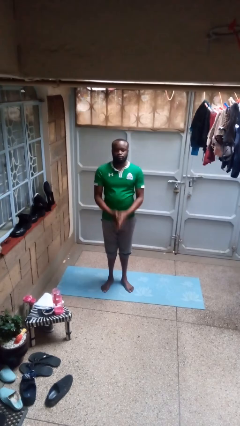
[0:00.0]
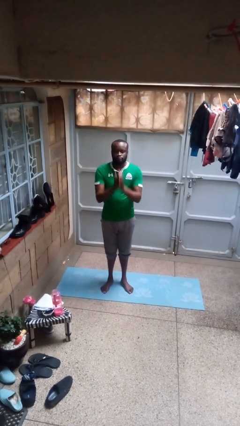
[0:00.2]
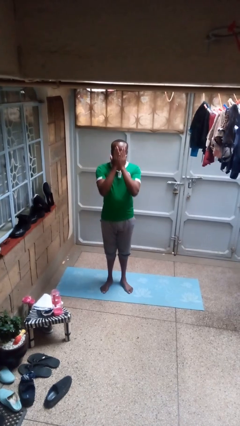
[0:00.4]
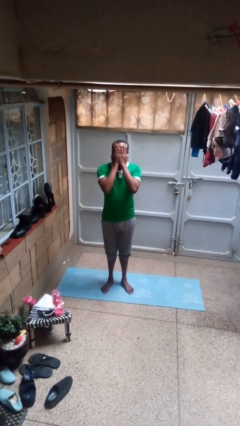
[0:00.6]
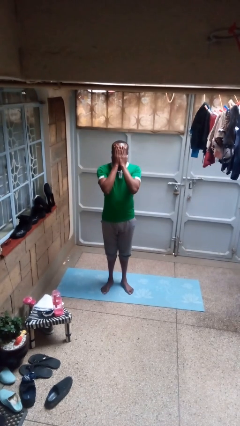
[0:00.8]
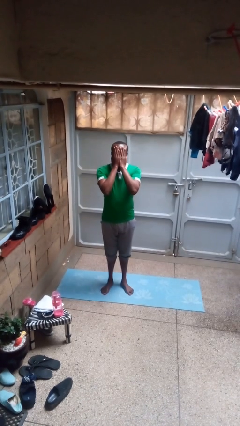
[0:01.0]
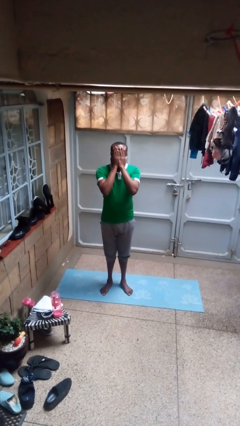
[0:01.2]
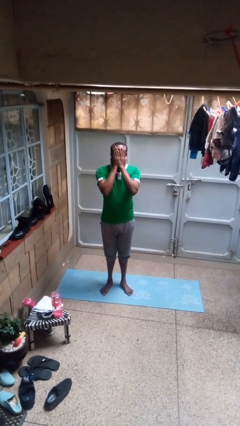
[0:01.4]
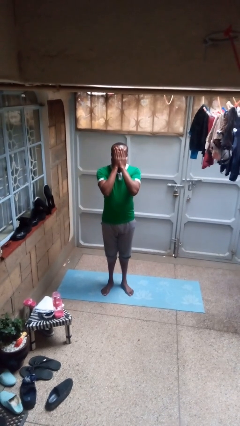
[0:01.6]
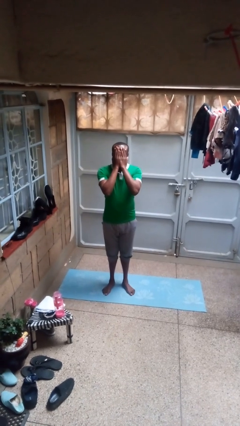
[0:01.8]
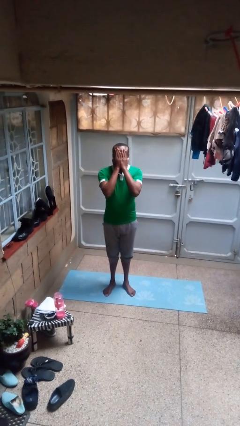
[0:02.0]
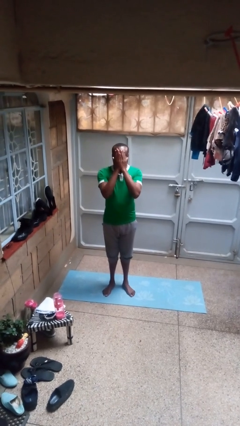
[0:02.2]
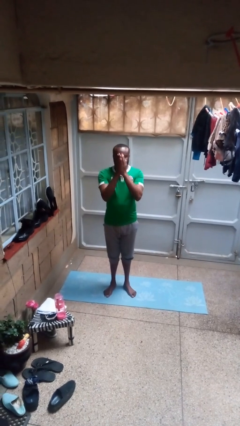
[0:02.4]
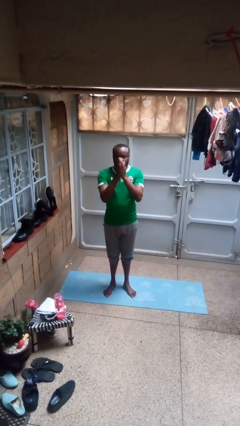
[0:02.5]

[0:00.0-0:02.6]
person covers face with hands

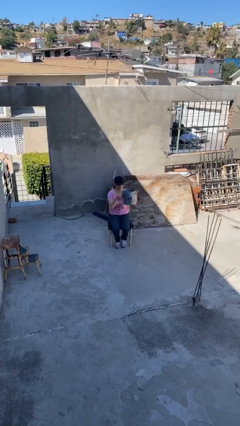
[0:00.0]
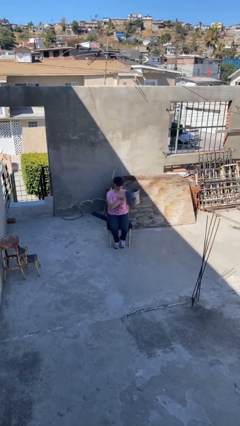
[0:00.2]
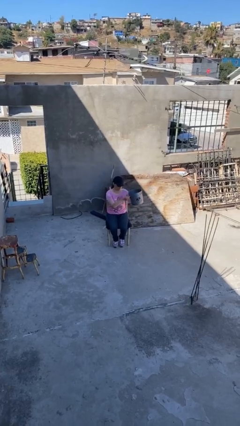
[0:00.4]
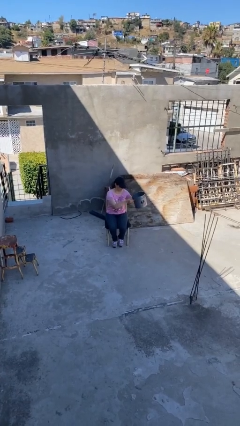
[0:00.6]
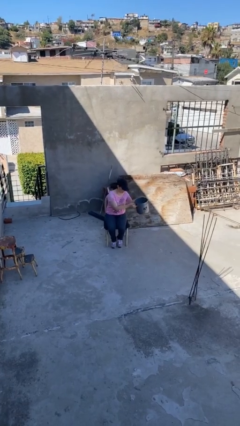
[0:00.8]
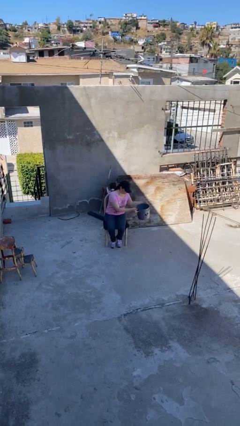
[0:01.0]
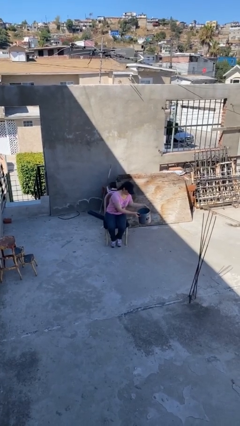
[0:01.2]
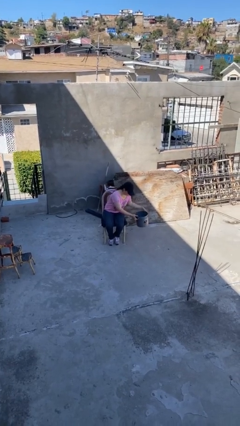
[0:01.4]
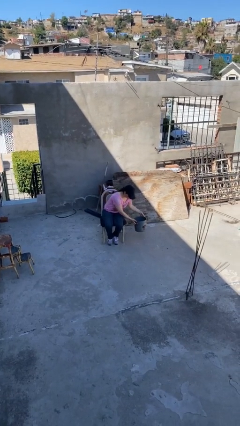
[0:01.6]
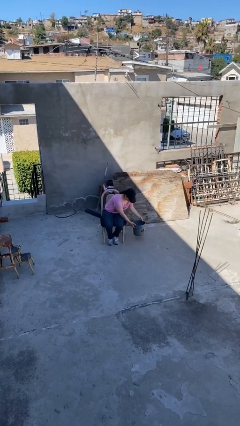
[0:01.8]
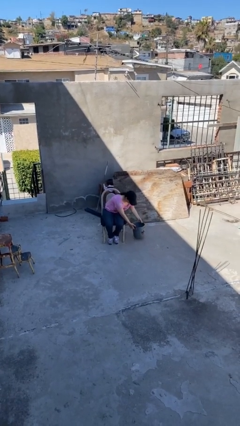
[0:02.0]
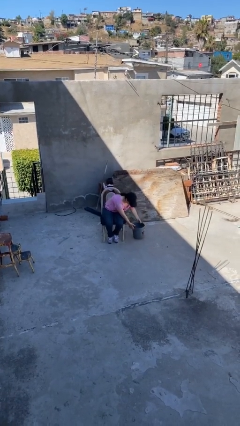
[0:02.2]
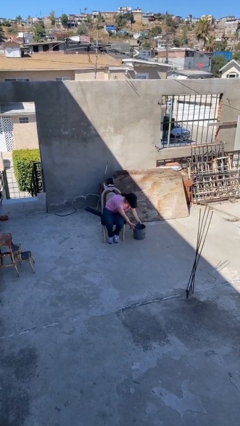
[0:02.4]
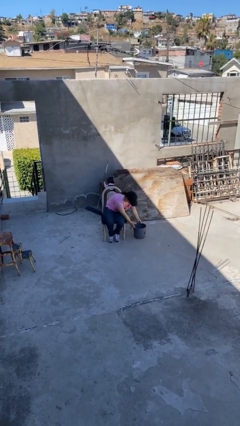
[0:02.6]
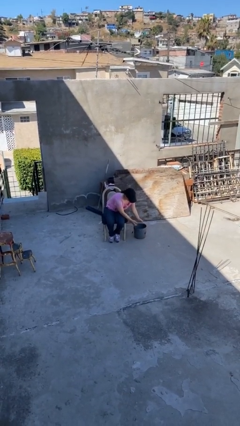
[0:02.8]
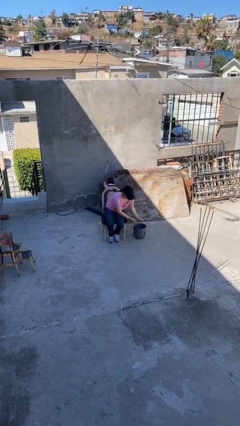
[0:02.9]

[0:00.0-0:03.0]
person puts down object on floor

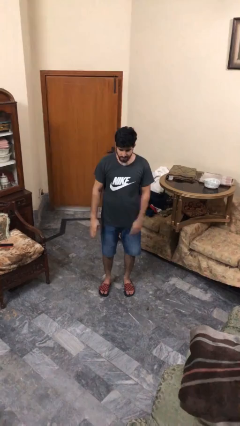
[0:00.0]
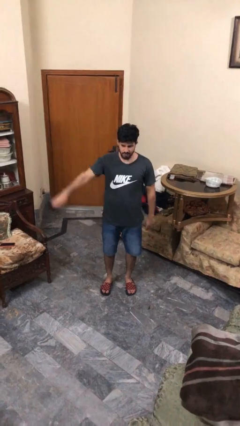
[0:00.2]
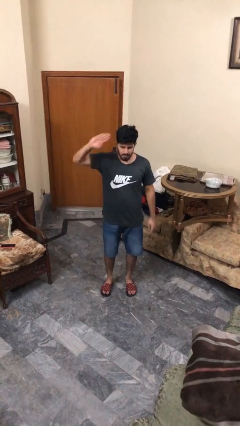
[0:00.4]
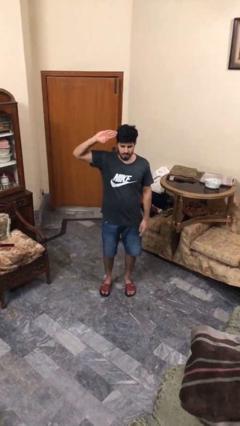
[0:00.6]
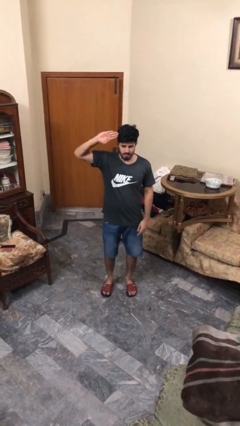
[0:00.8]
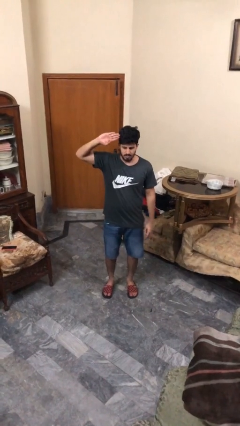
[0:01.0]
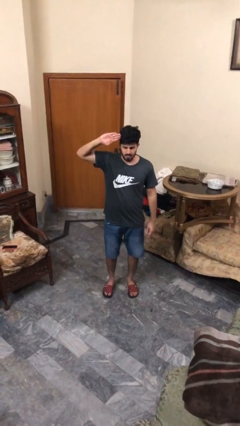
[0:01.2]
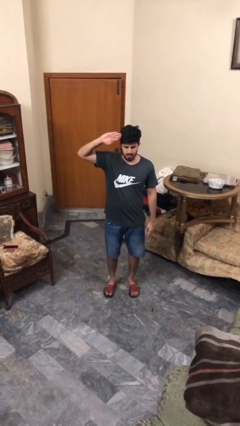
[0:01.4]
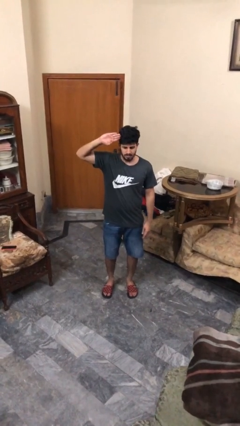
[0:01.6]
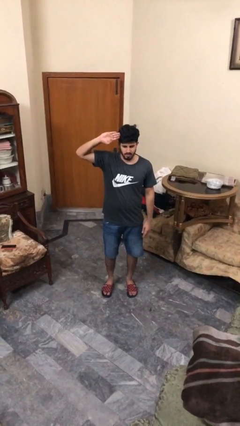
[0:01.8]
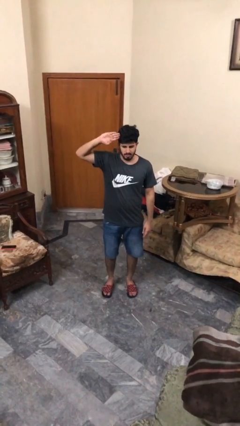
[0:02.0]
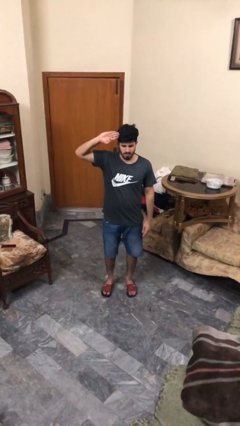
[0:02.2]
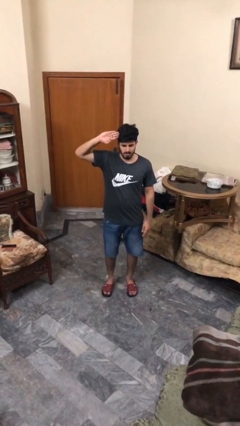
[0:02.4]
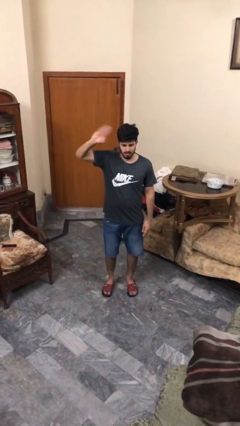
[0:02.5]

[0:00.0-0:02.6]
person salutes

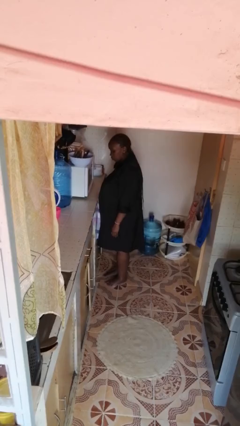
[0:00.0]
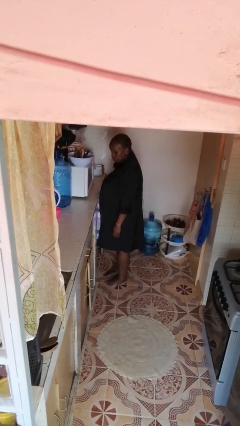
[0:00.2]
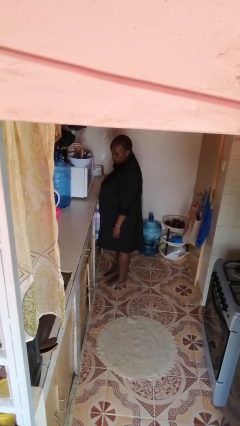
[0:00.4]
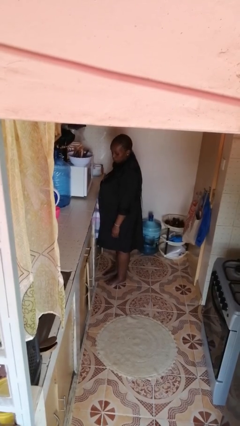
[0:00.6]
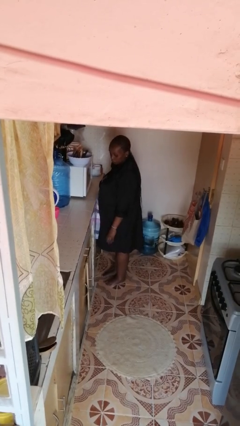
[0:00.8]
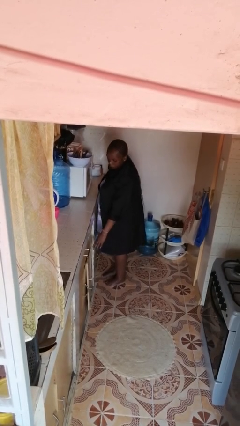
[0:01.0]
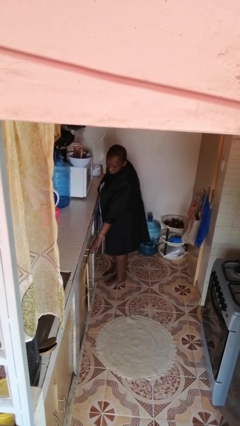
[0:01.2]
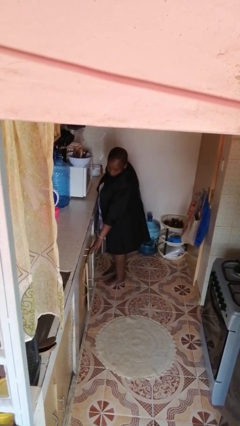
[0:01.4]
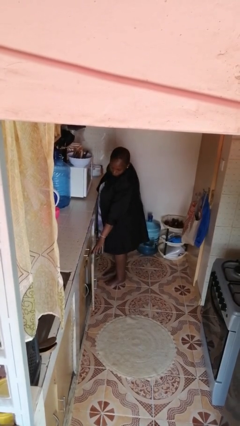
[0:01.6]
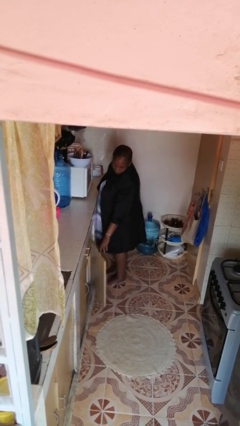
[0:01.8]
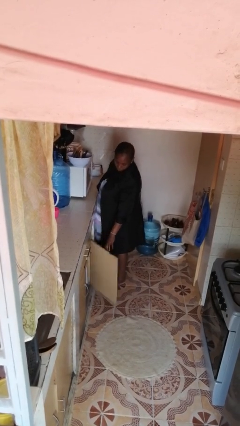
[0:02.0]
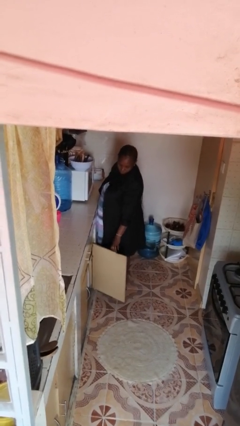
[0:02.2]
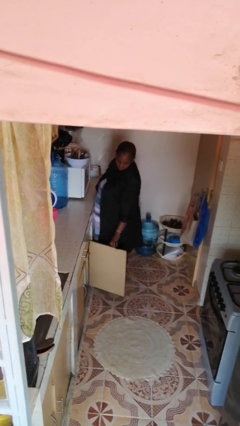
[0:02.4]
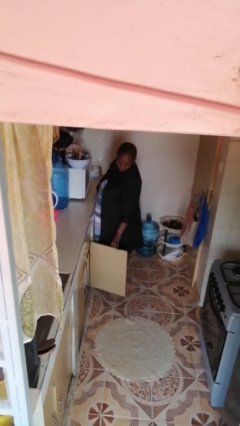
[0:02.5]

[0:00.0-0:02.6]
person opens cabinet

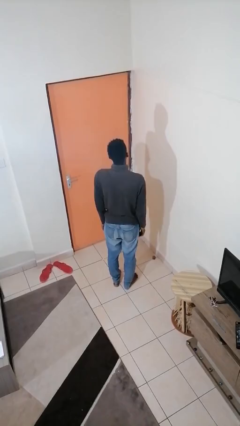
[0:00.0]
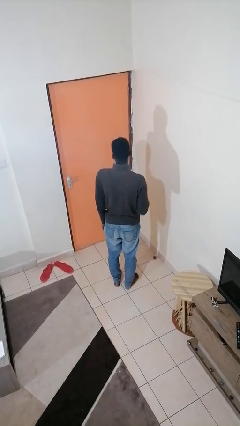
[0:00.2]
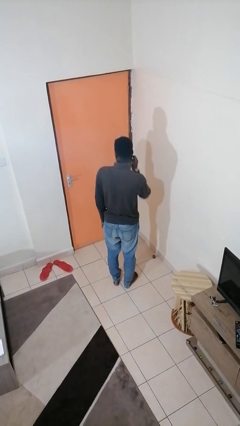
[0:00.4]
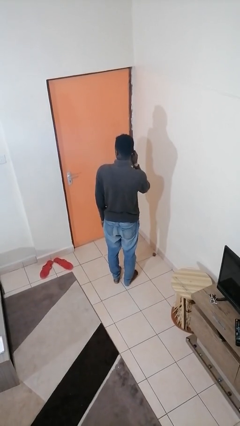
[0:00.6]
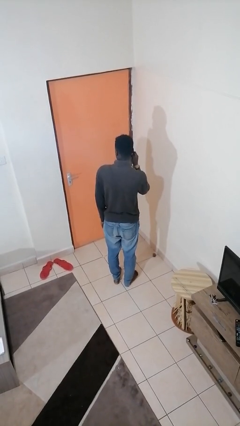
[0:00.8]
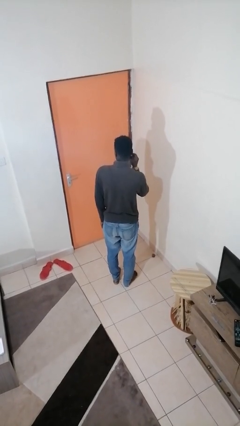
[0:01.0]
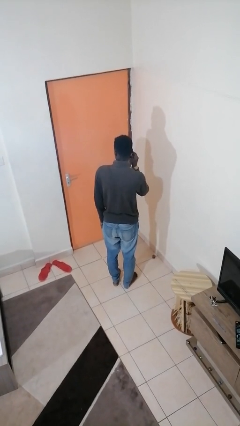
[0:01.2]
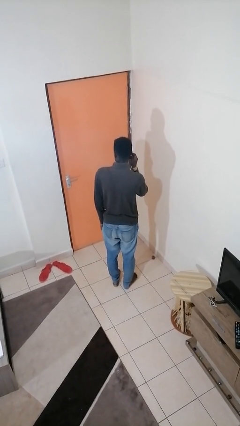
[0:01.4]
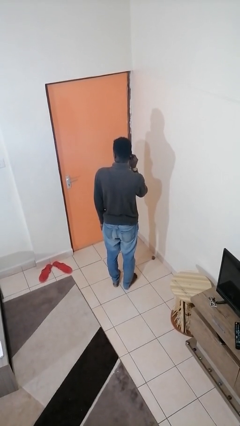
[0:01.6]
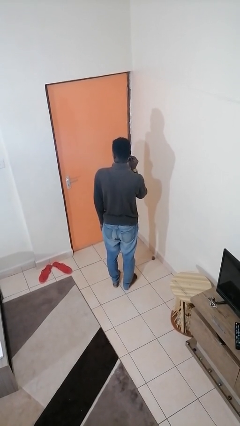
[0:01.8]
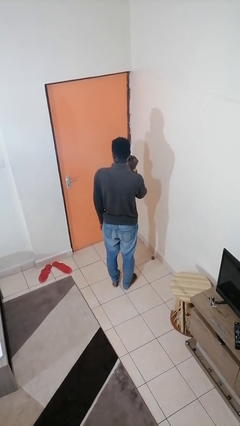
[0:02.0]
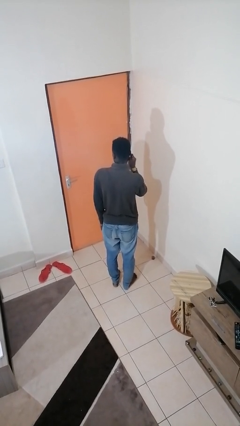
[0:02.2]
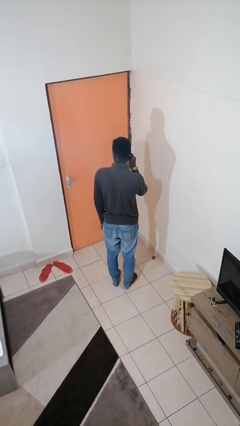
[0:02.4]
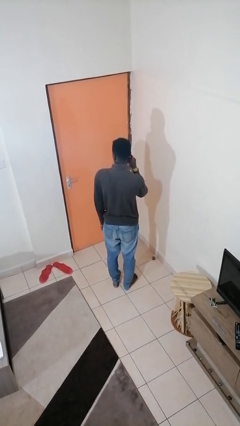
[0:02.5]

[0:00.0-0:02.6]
person touches earlobe

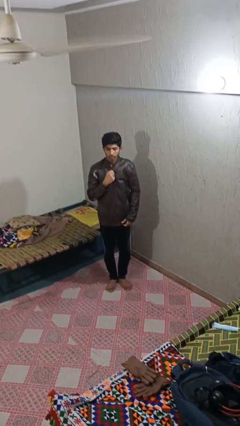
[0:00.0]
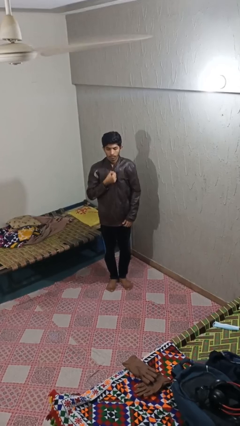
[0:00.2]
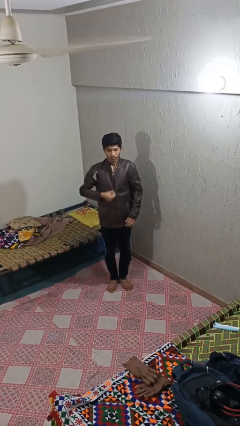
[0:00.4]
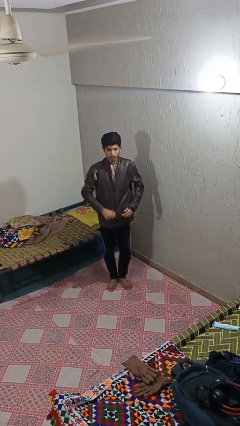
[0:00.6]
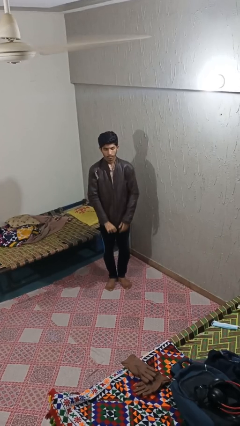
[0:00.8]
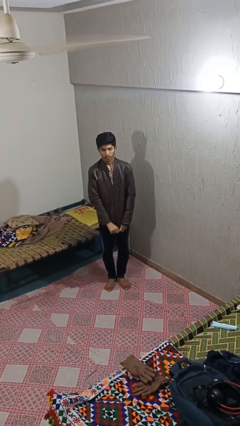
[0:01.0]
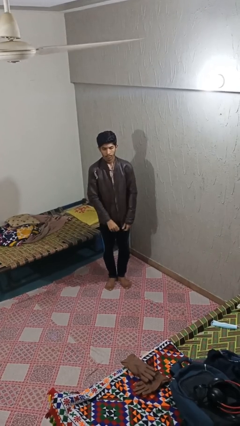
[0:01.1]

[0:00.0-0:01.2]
person unzips jacket

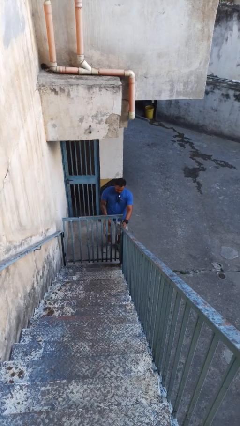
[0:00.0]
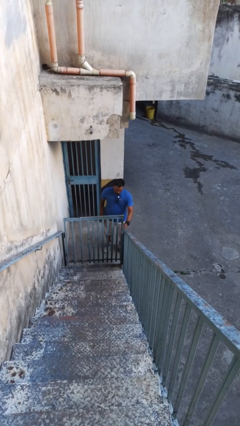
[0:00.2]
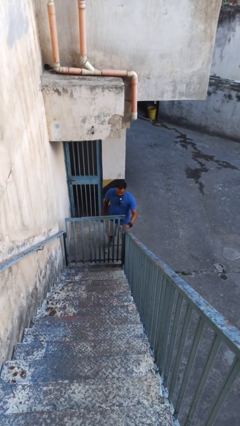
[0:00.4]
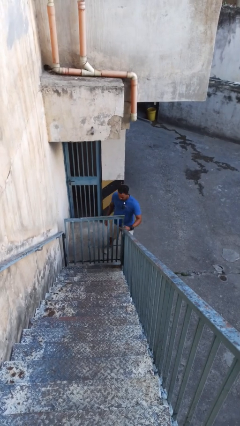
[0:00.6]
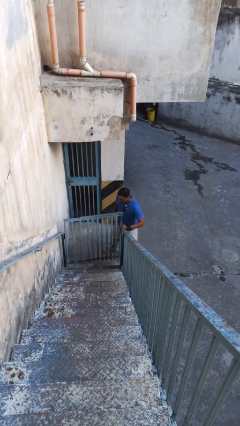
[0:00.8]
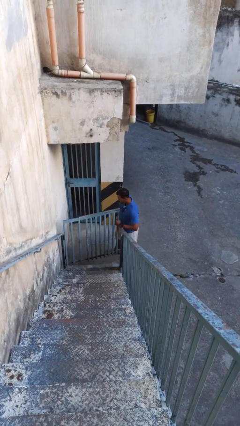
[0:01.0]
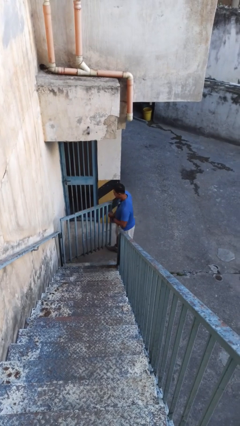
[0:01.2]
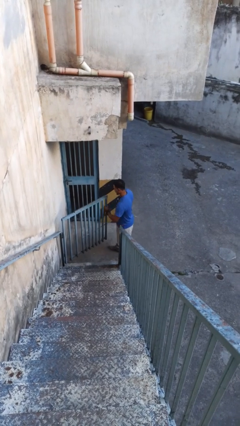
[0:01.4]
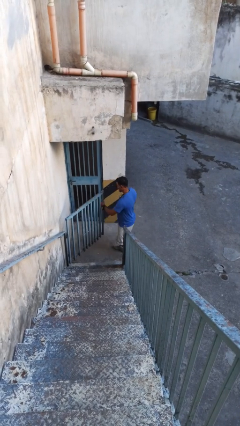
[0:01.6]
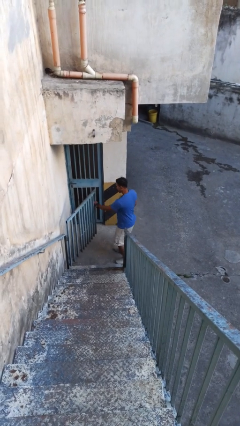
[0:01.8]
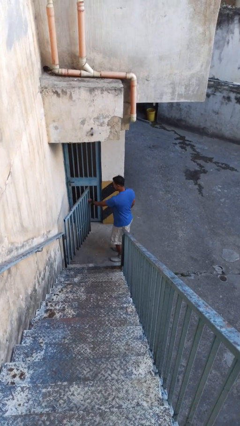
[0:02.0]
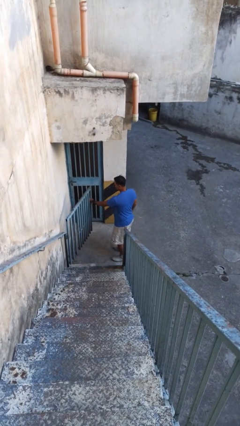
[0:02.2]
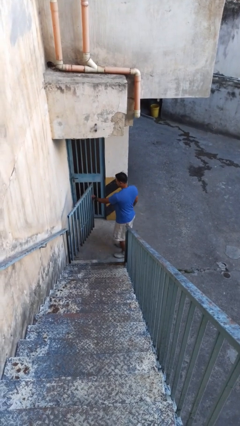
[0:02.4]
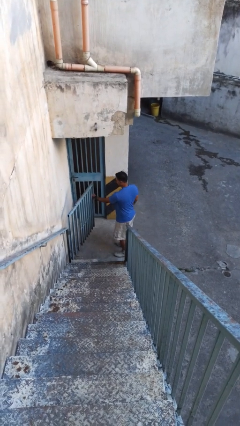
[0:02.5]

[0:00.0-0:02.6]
person opens facility door
